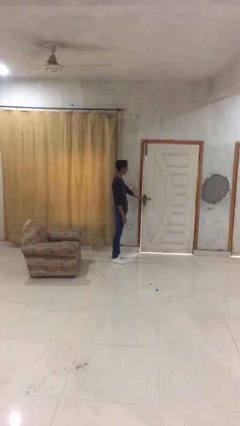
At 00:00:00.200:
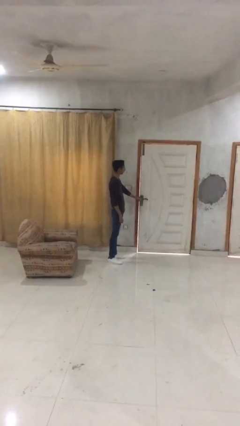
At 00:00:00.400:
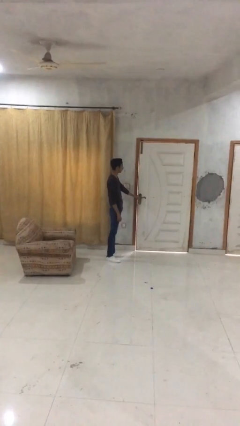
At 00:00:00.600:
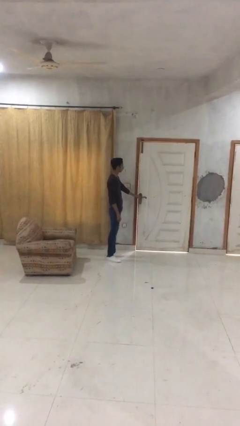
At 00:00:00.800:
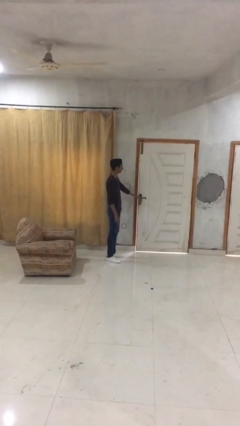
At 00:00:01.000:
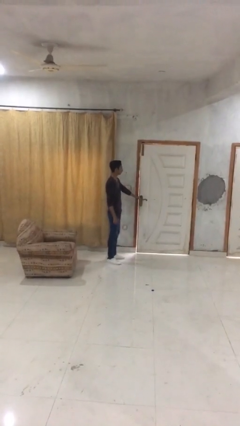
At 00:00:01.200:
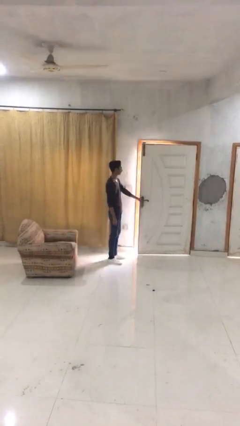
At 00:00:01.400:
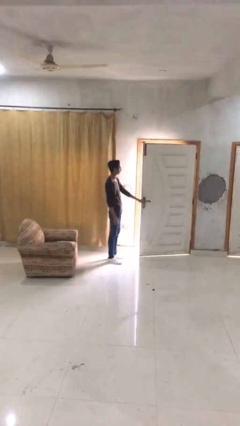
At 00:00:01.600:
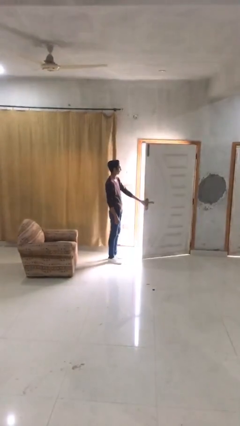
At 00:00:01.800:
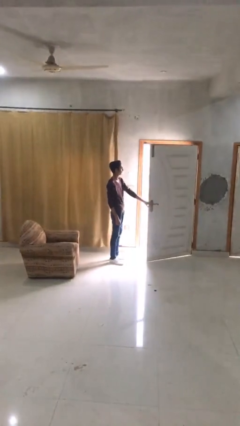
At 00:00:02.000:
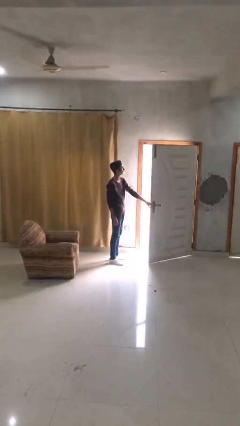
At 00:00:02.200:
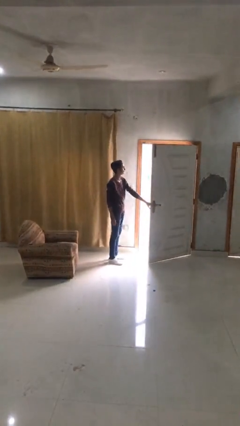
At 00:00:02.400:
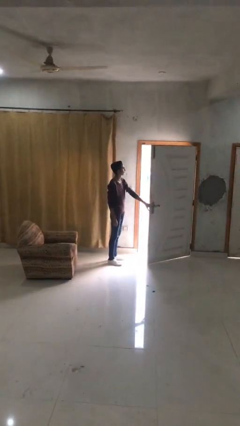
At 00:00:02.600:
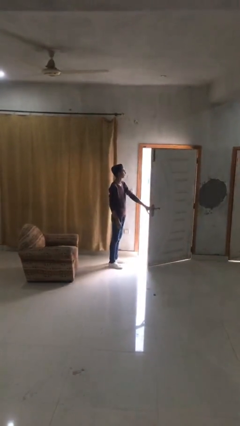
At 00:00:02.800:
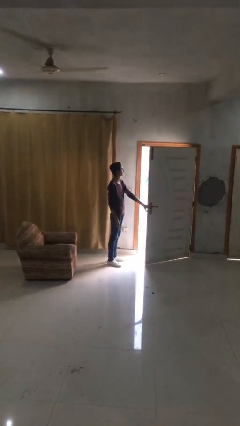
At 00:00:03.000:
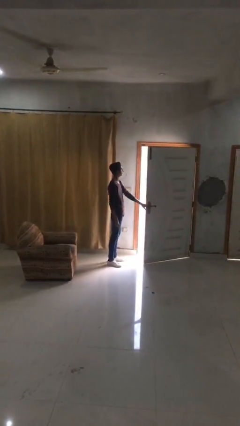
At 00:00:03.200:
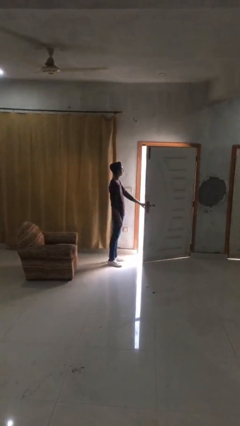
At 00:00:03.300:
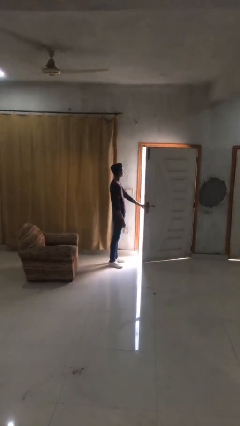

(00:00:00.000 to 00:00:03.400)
person opens facility door

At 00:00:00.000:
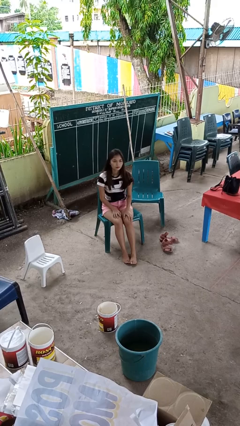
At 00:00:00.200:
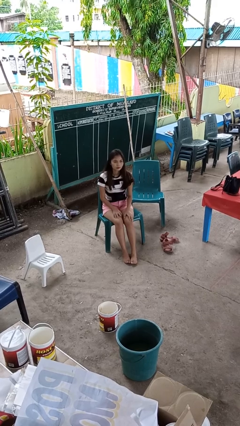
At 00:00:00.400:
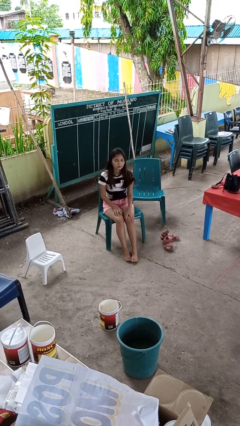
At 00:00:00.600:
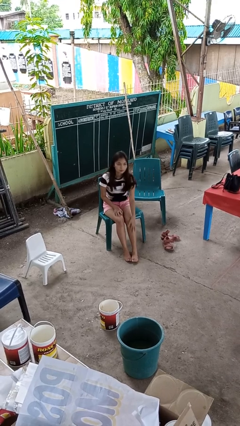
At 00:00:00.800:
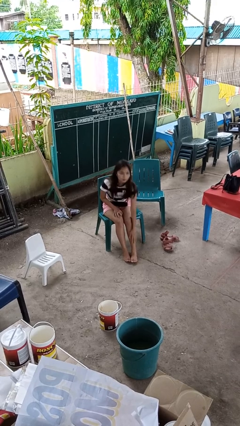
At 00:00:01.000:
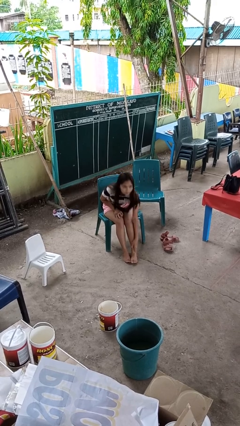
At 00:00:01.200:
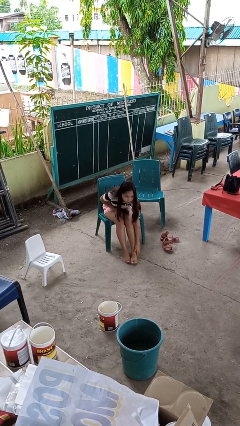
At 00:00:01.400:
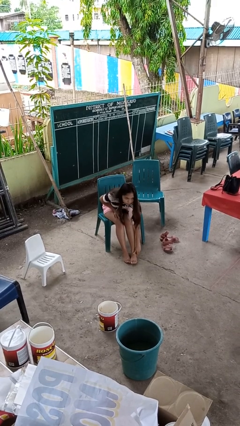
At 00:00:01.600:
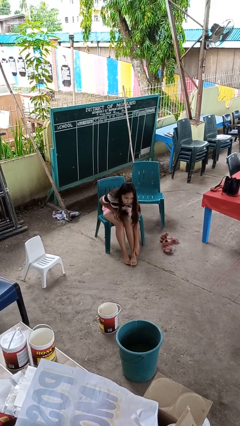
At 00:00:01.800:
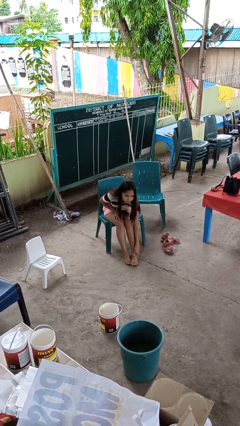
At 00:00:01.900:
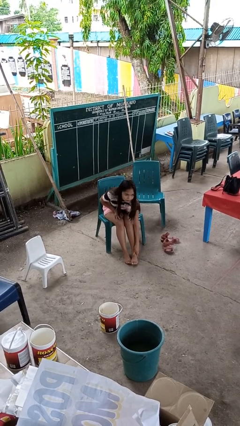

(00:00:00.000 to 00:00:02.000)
person rubs foot

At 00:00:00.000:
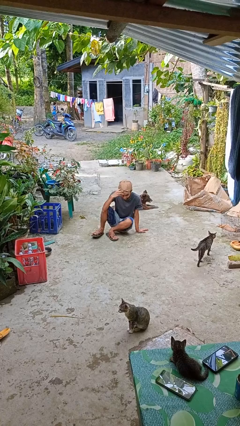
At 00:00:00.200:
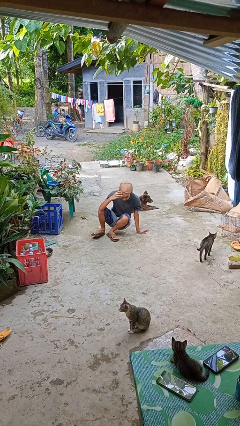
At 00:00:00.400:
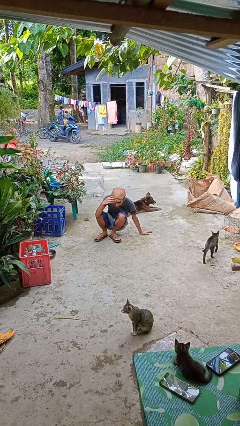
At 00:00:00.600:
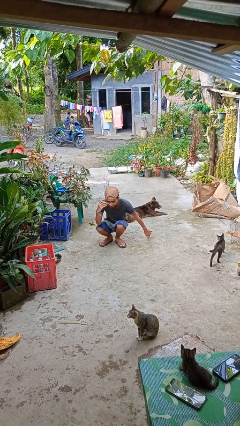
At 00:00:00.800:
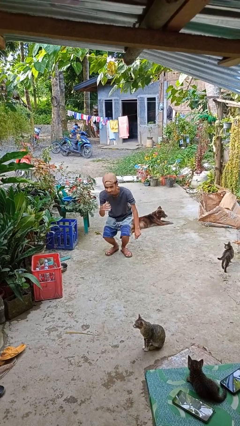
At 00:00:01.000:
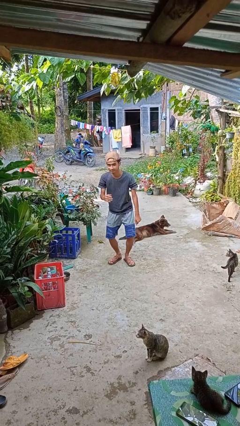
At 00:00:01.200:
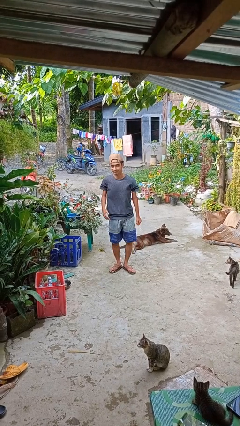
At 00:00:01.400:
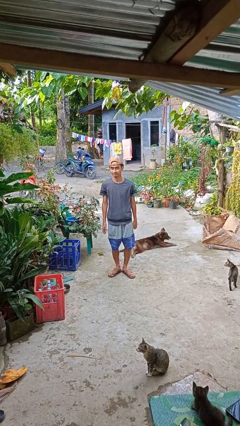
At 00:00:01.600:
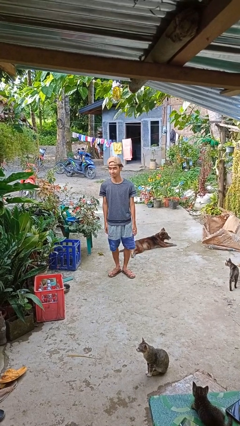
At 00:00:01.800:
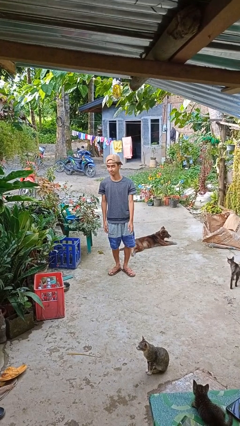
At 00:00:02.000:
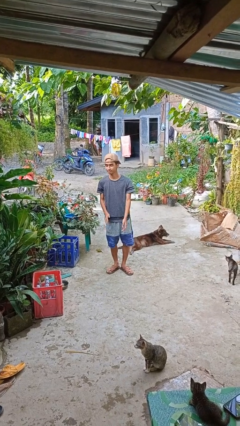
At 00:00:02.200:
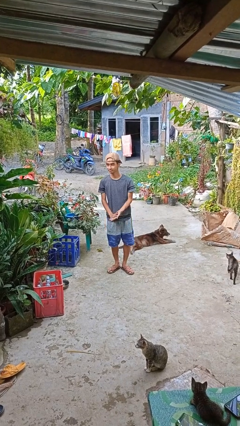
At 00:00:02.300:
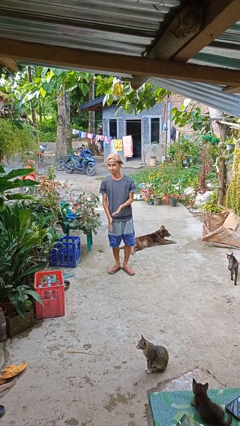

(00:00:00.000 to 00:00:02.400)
person stands up from floor

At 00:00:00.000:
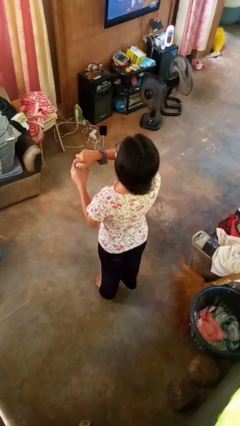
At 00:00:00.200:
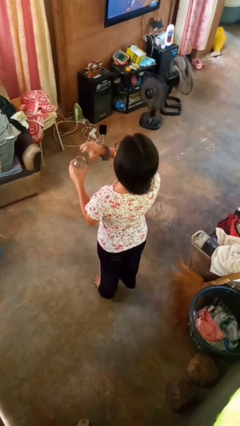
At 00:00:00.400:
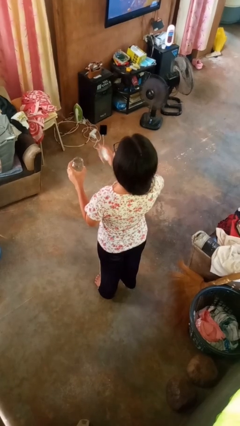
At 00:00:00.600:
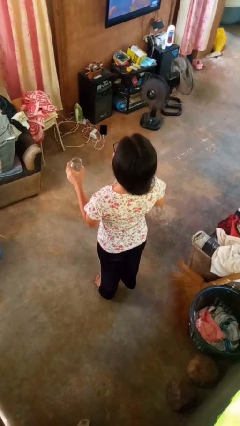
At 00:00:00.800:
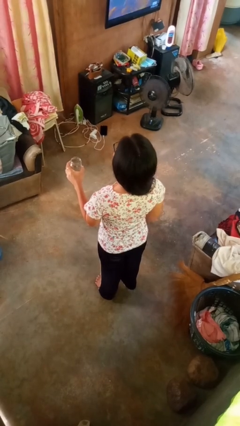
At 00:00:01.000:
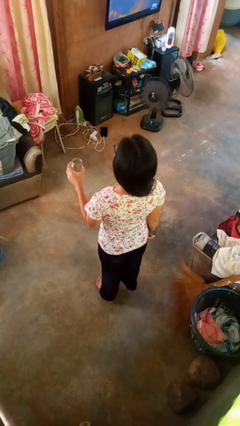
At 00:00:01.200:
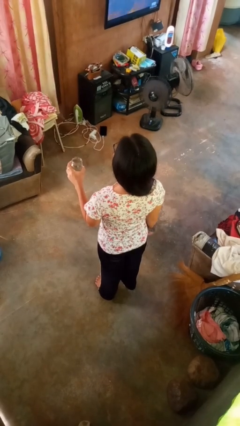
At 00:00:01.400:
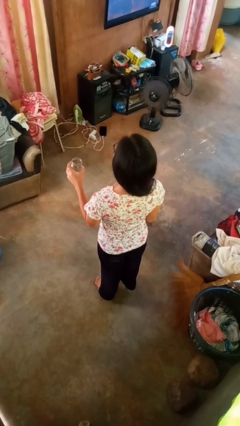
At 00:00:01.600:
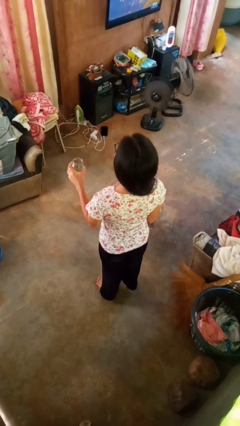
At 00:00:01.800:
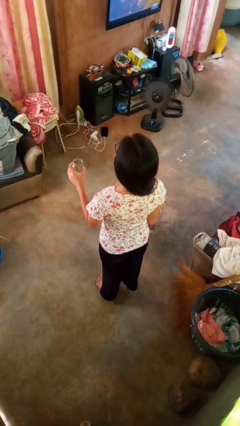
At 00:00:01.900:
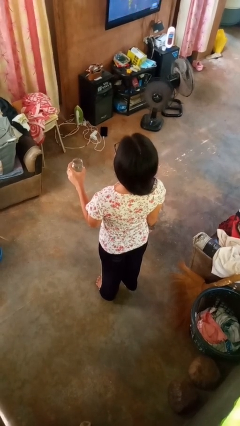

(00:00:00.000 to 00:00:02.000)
person opens jar

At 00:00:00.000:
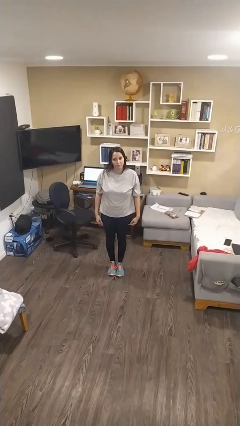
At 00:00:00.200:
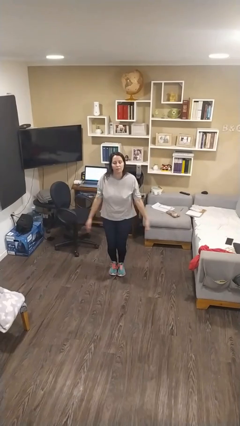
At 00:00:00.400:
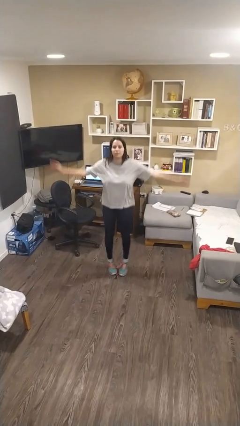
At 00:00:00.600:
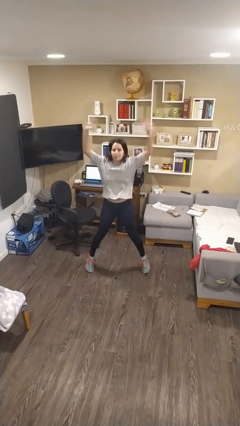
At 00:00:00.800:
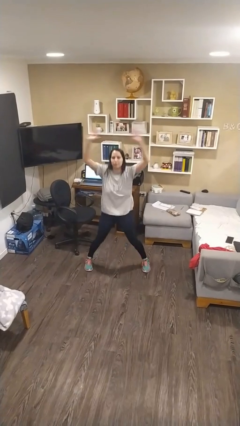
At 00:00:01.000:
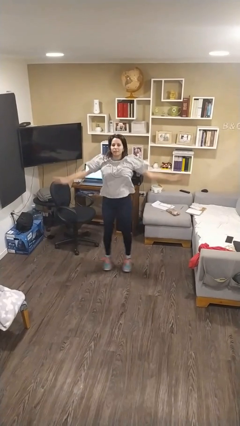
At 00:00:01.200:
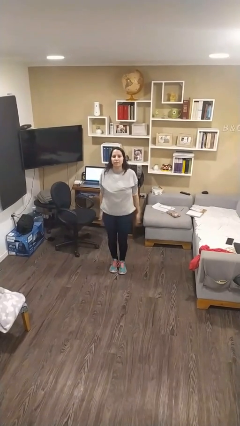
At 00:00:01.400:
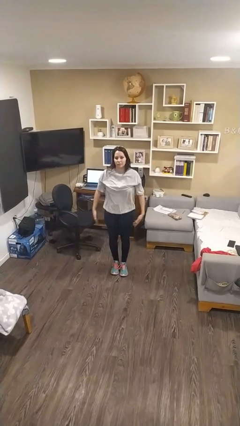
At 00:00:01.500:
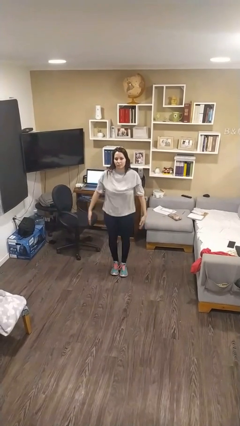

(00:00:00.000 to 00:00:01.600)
person exercises with jumping jacks

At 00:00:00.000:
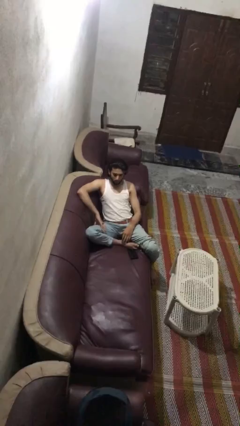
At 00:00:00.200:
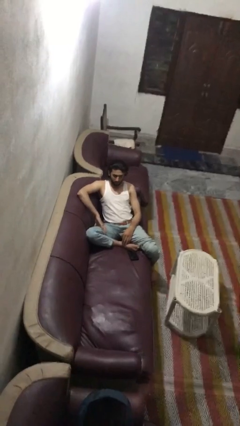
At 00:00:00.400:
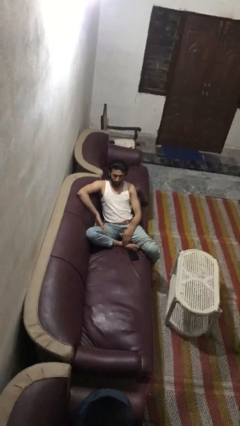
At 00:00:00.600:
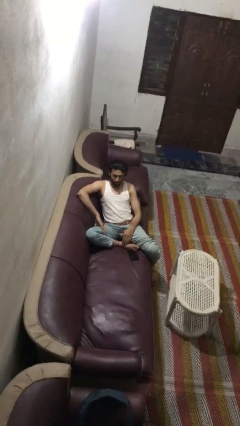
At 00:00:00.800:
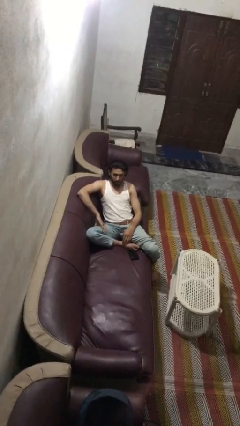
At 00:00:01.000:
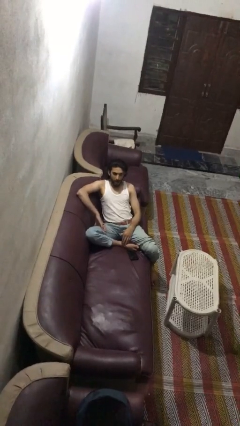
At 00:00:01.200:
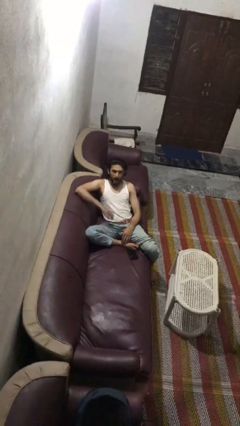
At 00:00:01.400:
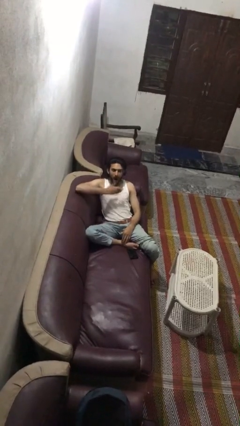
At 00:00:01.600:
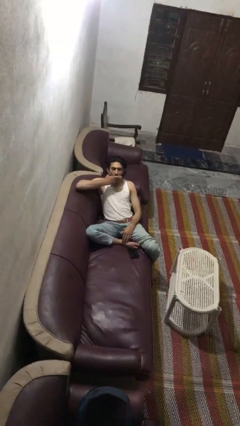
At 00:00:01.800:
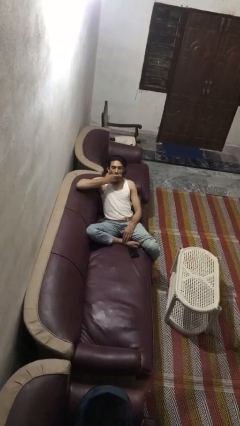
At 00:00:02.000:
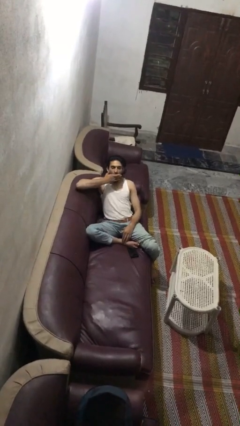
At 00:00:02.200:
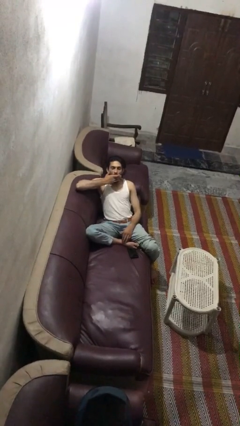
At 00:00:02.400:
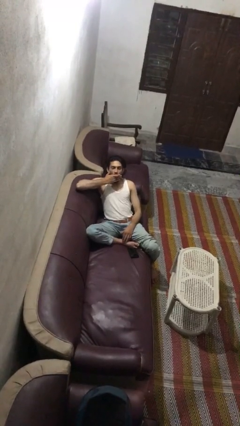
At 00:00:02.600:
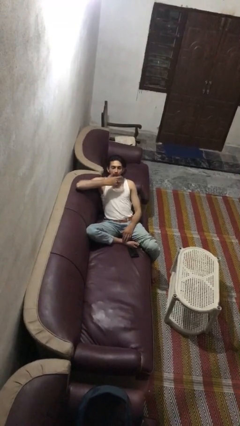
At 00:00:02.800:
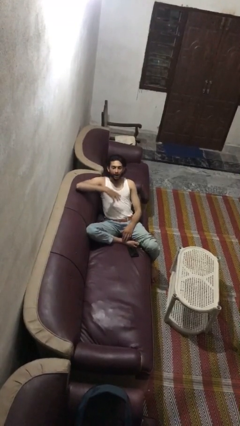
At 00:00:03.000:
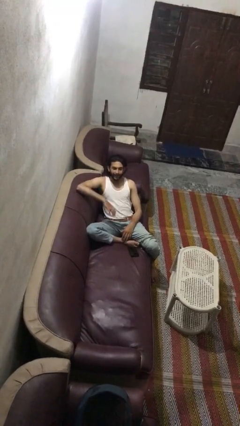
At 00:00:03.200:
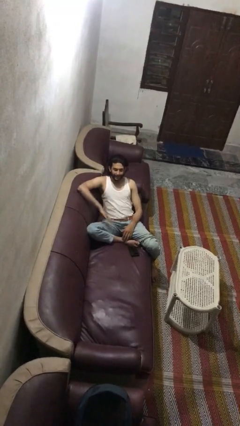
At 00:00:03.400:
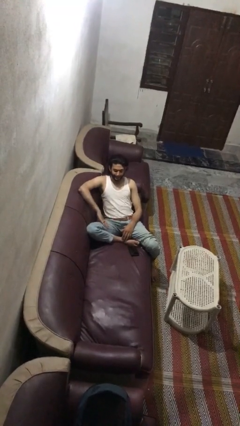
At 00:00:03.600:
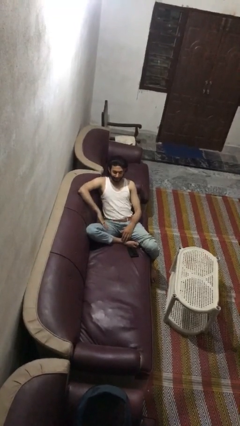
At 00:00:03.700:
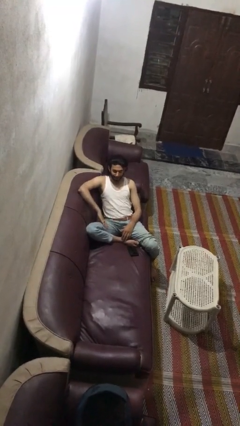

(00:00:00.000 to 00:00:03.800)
person yawns

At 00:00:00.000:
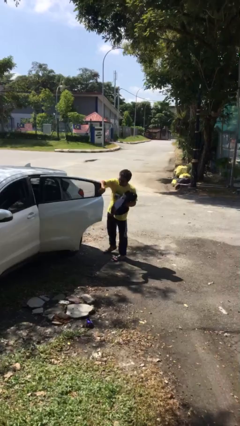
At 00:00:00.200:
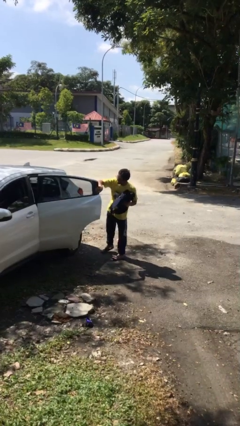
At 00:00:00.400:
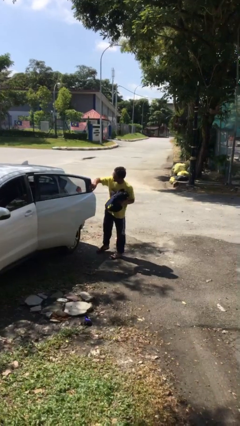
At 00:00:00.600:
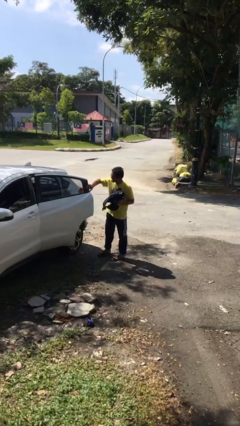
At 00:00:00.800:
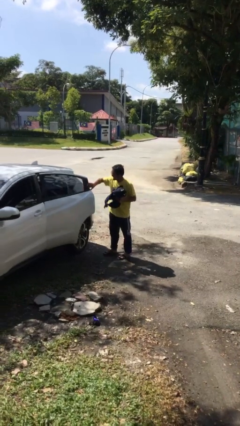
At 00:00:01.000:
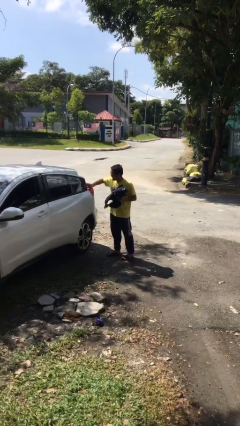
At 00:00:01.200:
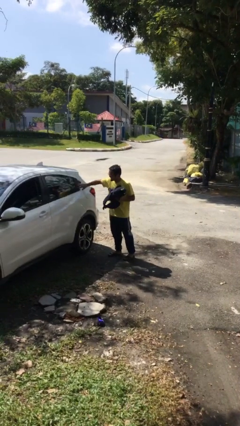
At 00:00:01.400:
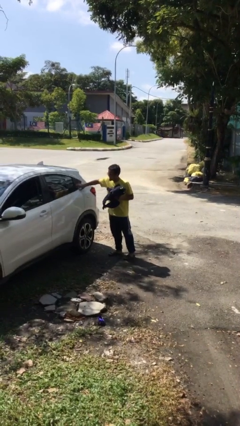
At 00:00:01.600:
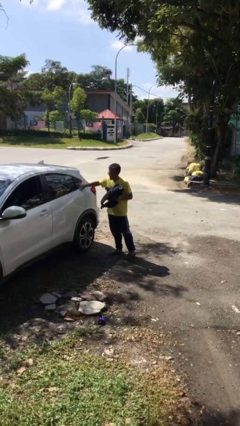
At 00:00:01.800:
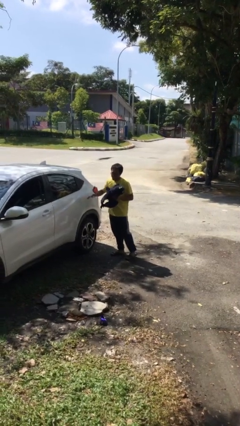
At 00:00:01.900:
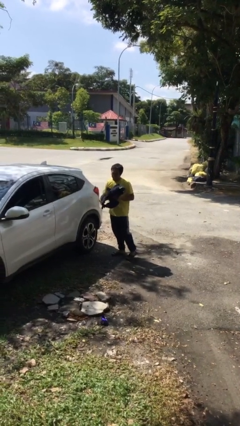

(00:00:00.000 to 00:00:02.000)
person closes car door
